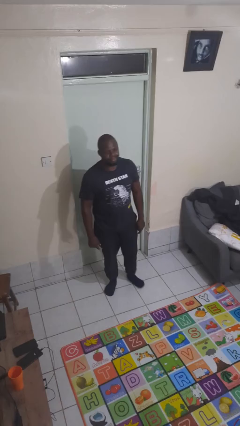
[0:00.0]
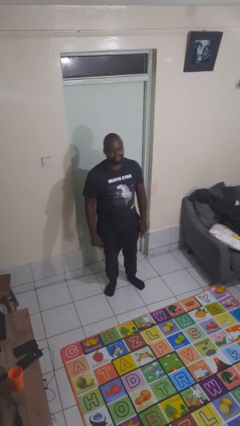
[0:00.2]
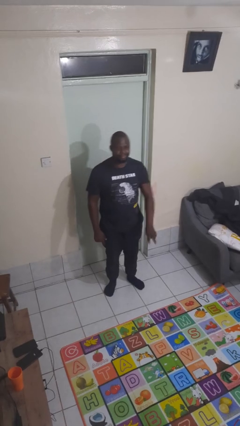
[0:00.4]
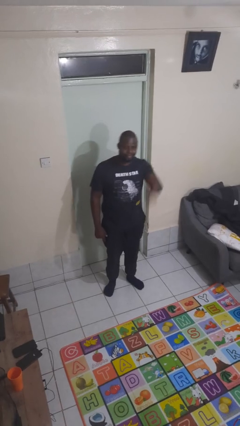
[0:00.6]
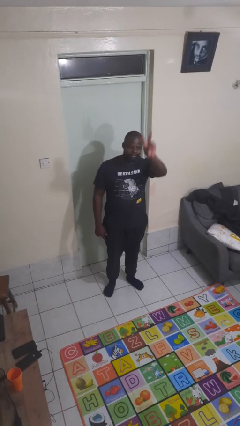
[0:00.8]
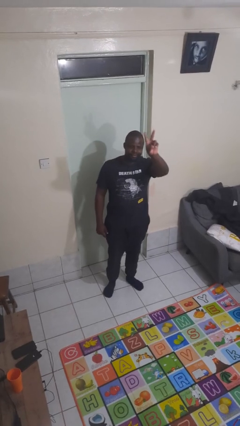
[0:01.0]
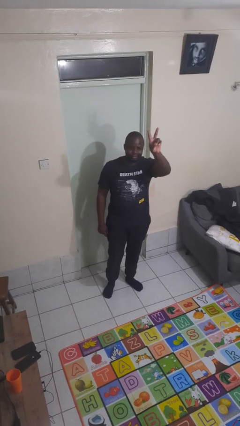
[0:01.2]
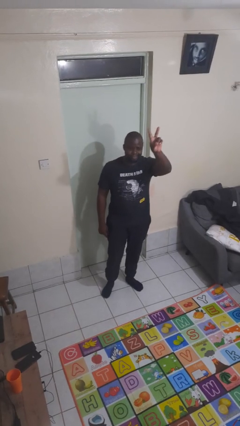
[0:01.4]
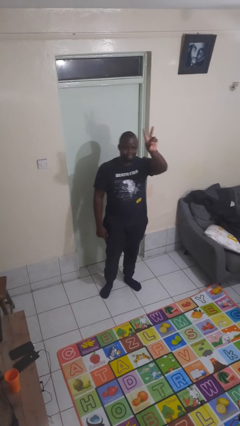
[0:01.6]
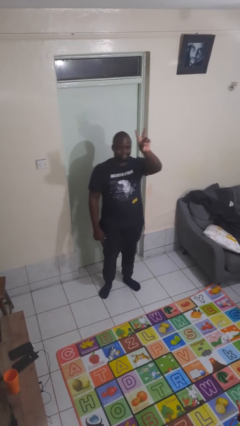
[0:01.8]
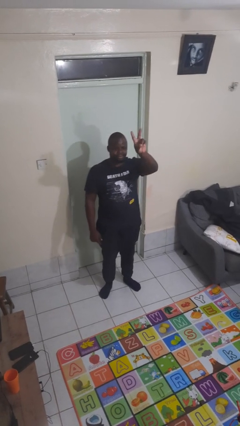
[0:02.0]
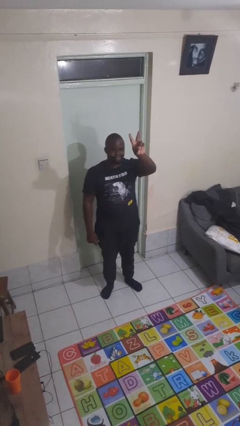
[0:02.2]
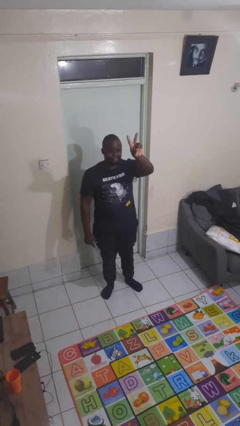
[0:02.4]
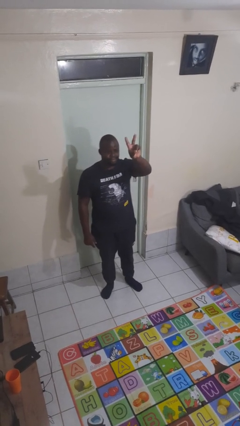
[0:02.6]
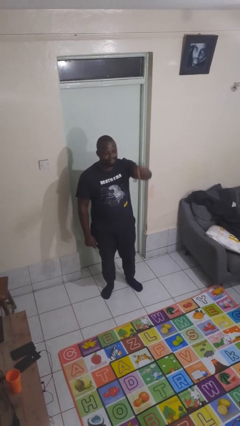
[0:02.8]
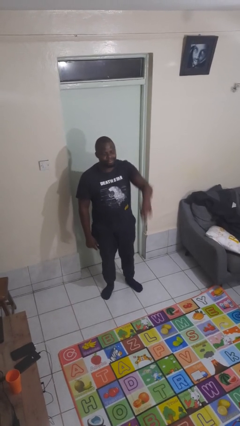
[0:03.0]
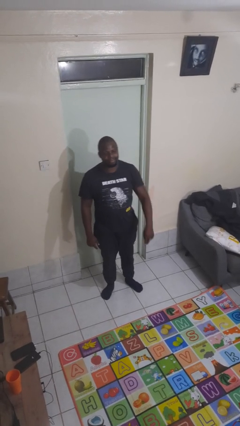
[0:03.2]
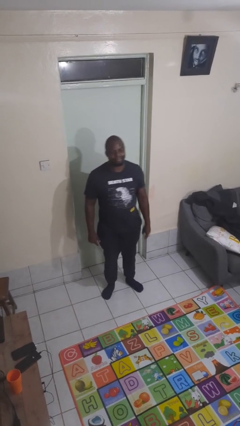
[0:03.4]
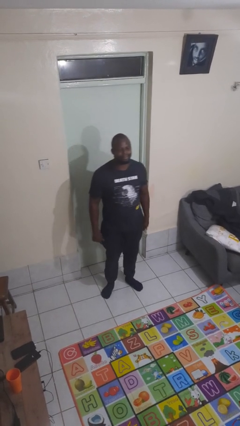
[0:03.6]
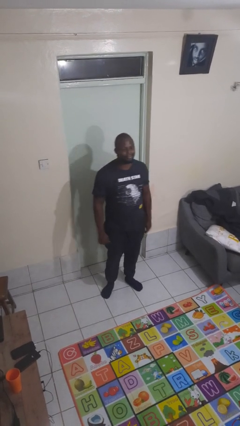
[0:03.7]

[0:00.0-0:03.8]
person gestures peace

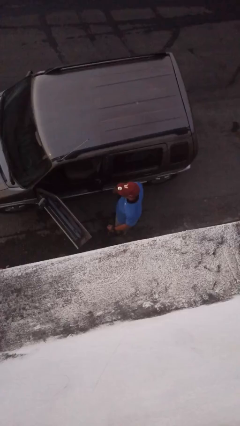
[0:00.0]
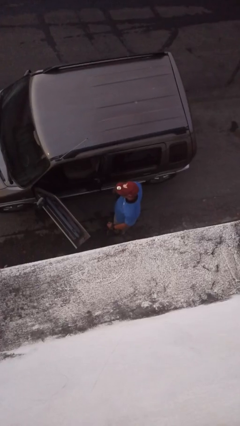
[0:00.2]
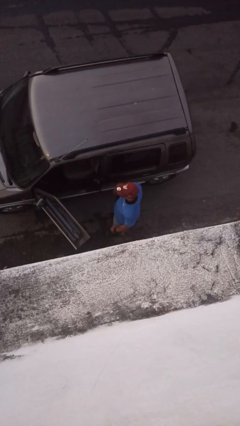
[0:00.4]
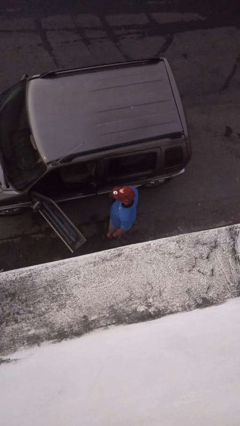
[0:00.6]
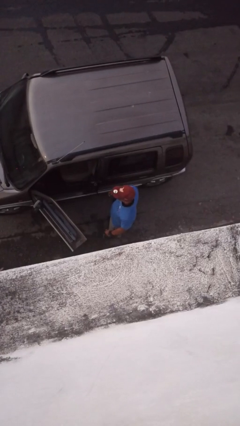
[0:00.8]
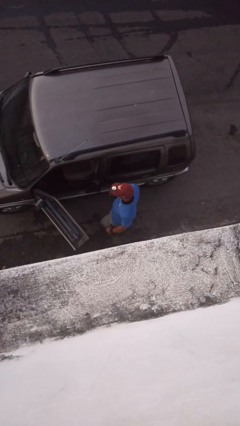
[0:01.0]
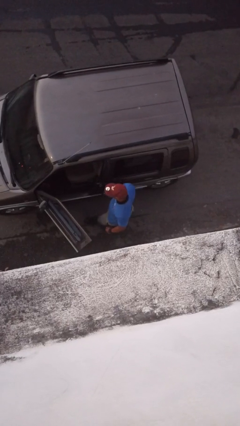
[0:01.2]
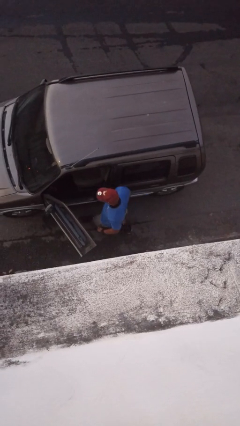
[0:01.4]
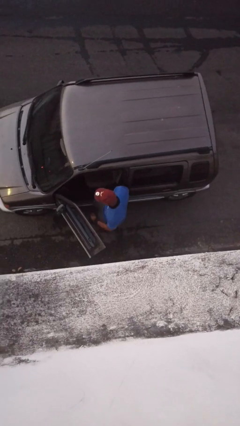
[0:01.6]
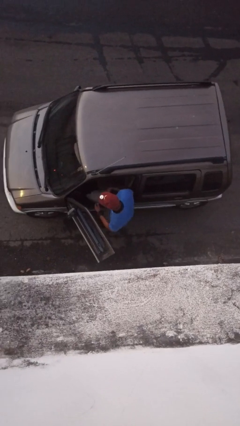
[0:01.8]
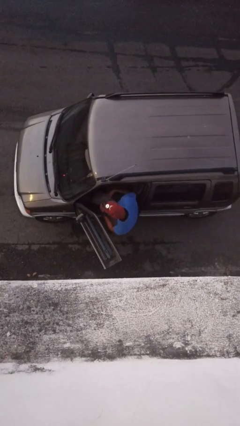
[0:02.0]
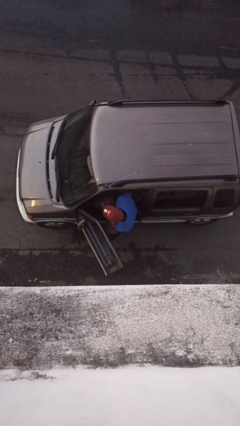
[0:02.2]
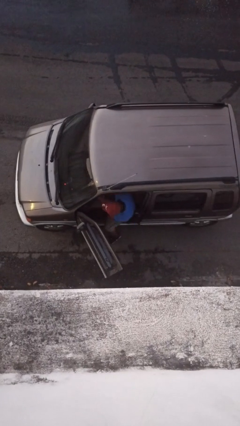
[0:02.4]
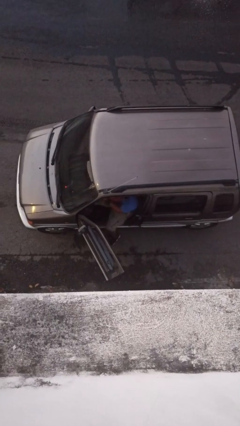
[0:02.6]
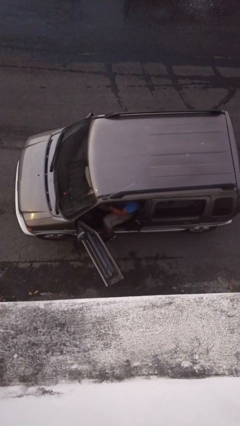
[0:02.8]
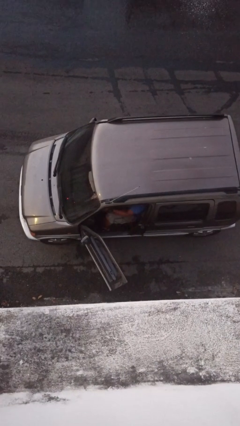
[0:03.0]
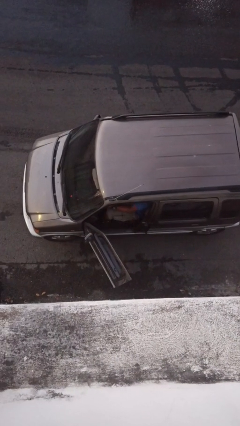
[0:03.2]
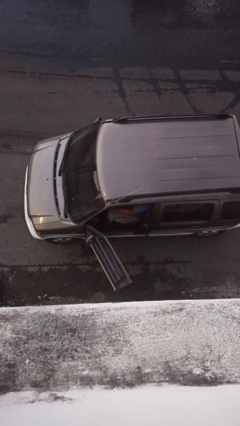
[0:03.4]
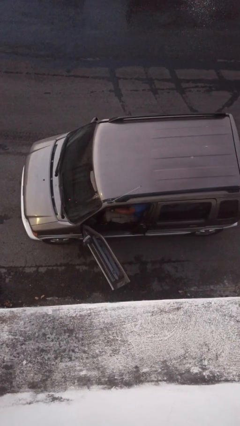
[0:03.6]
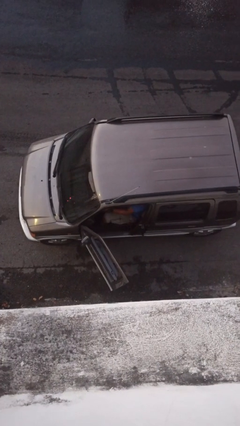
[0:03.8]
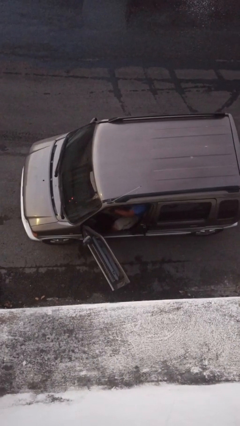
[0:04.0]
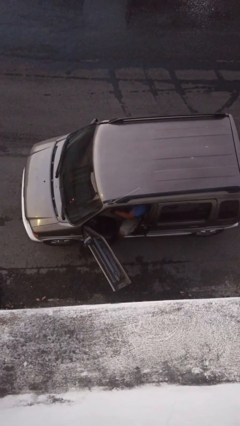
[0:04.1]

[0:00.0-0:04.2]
person enters car

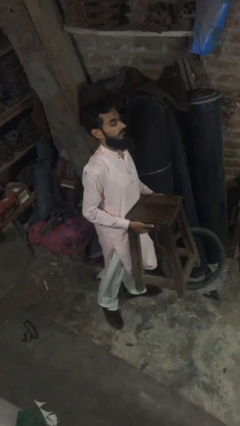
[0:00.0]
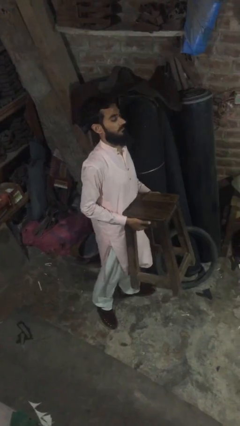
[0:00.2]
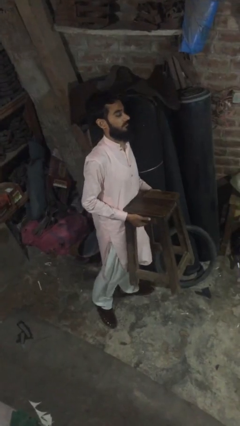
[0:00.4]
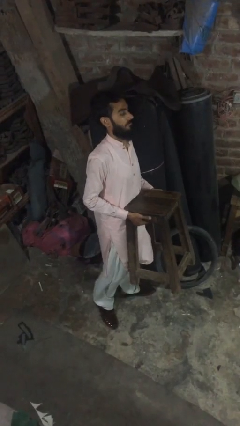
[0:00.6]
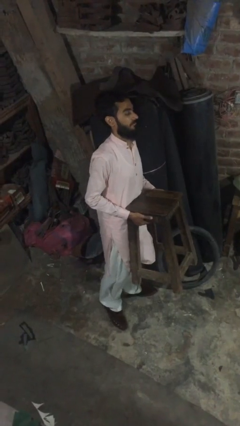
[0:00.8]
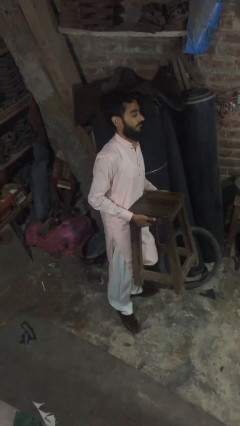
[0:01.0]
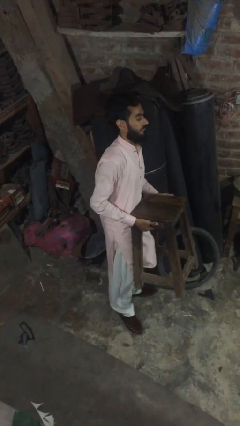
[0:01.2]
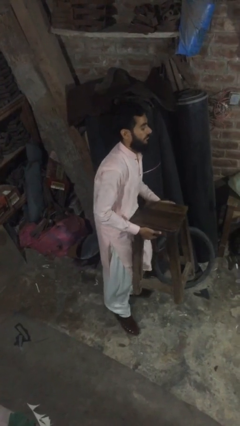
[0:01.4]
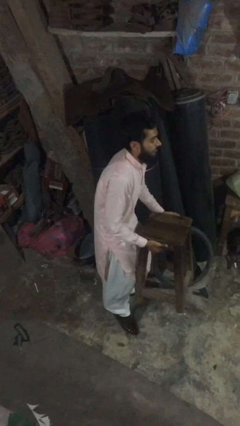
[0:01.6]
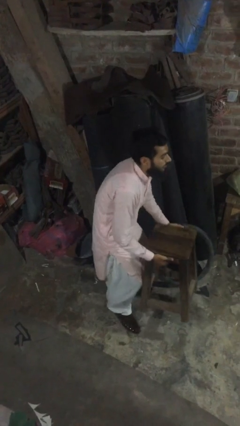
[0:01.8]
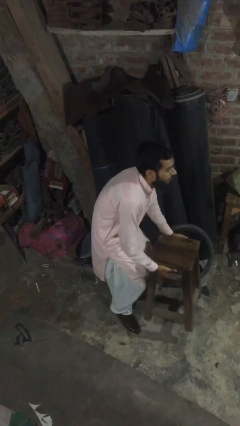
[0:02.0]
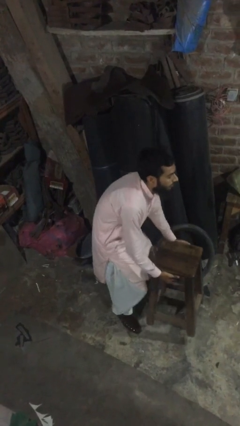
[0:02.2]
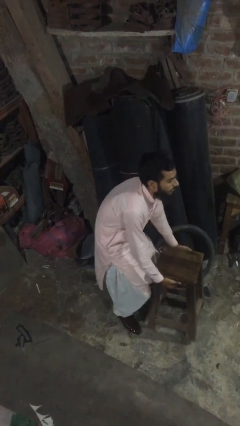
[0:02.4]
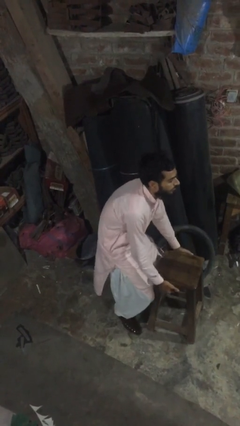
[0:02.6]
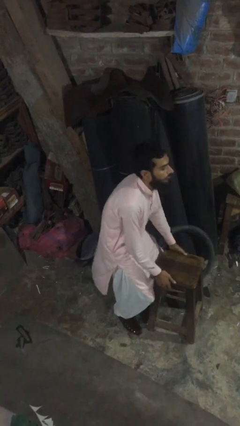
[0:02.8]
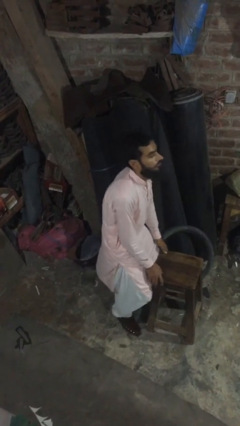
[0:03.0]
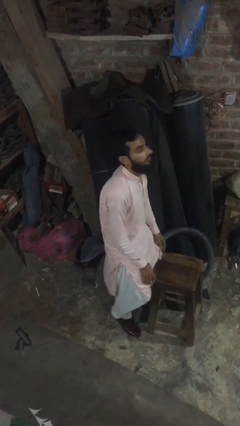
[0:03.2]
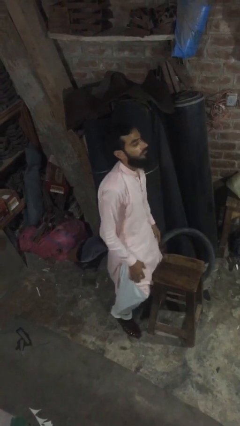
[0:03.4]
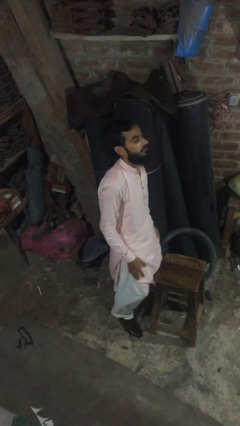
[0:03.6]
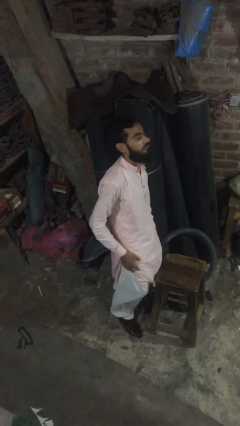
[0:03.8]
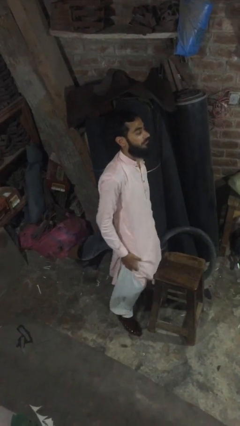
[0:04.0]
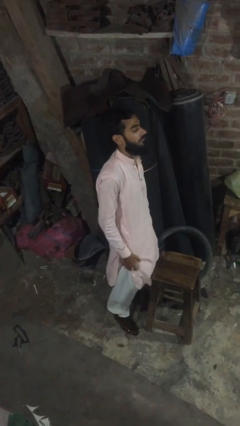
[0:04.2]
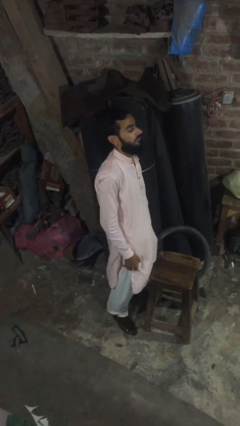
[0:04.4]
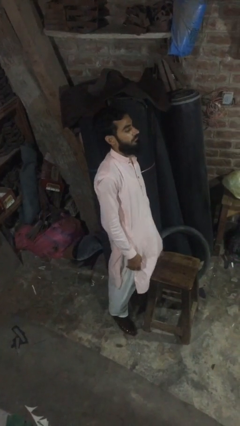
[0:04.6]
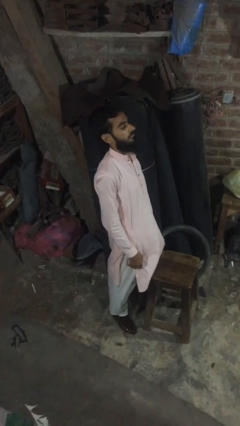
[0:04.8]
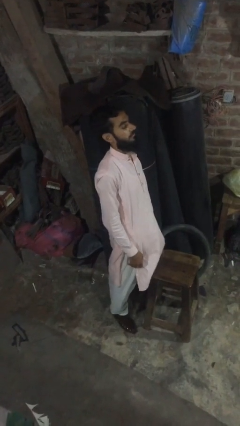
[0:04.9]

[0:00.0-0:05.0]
person puts down object on floor

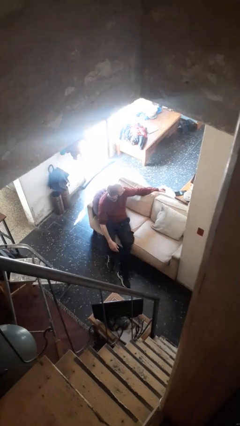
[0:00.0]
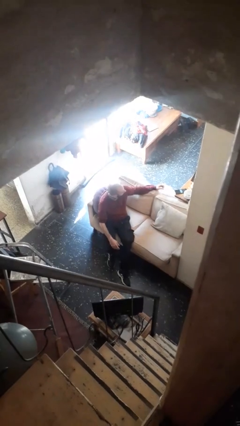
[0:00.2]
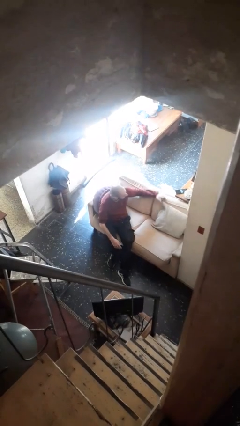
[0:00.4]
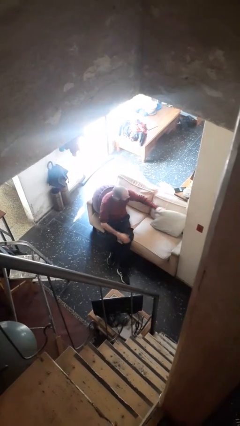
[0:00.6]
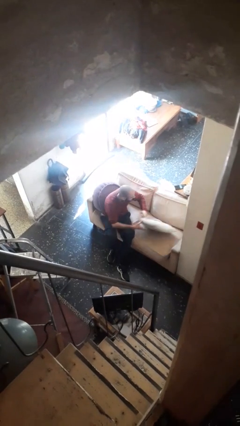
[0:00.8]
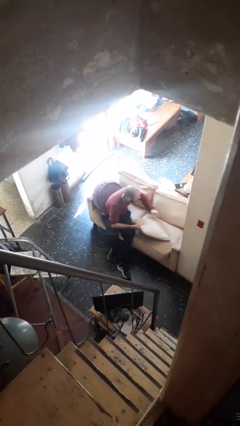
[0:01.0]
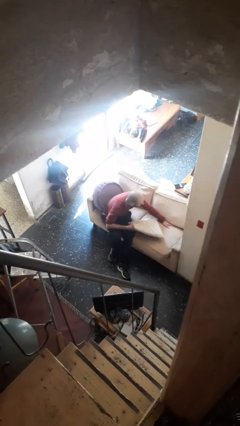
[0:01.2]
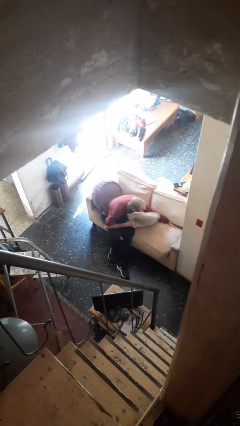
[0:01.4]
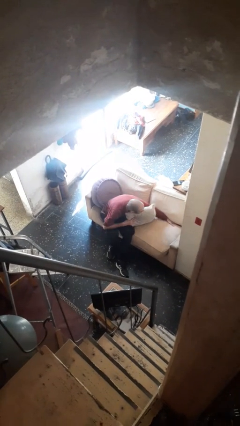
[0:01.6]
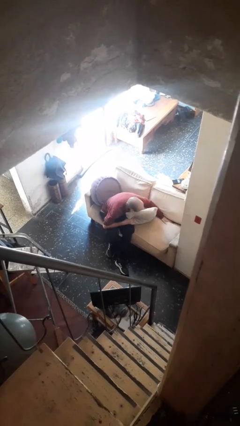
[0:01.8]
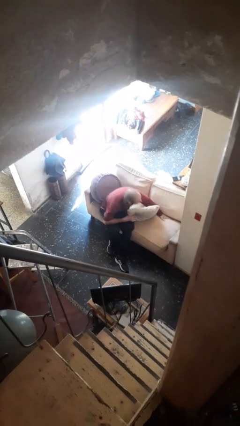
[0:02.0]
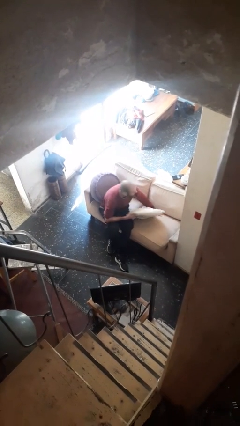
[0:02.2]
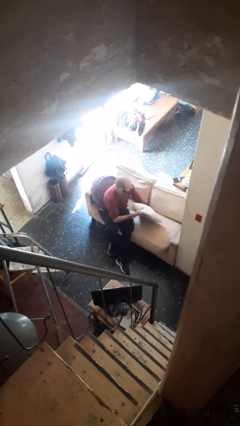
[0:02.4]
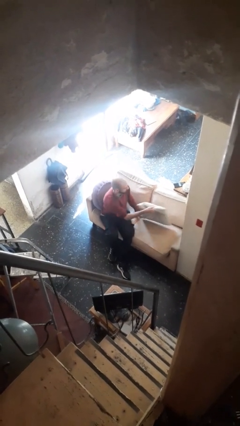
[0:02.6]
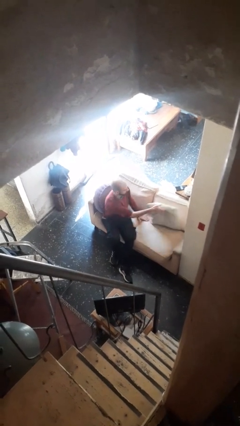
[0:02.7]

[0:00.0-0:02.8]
person searches in couch

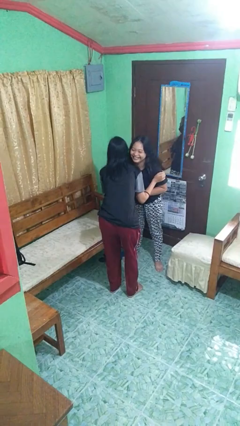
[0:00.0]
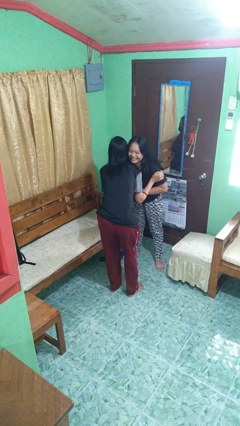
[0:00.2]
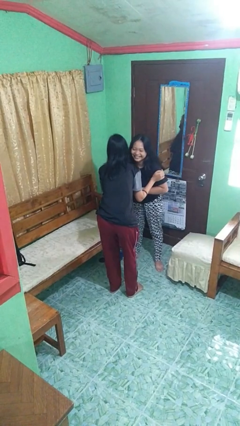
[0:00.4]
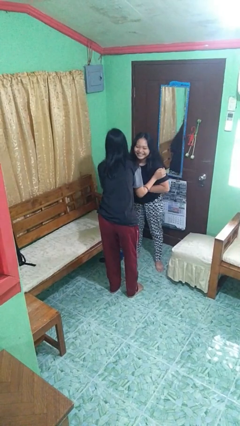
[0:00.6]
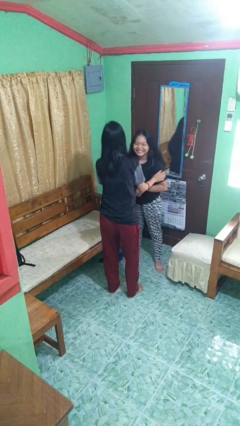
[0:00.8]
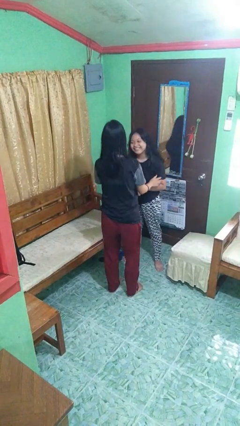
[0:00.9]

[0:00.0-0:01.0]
person kisses cheek of person

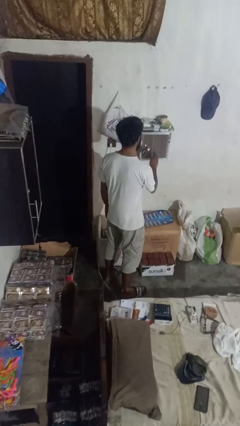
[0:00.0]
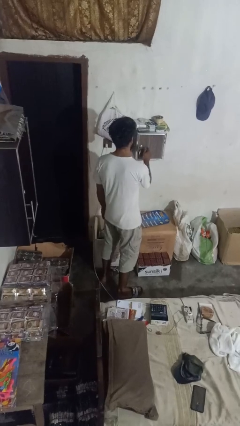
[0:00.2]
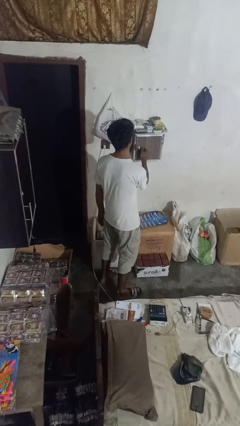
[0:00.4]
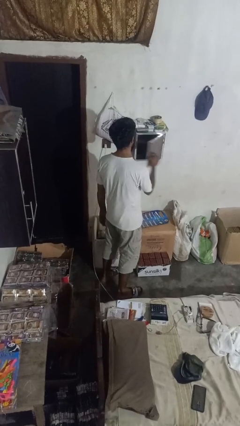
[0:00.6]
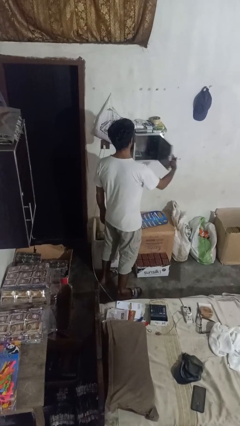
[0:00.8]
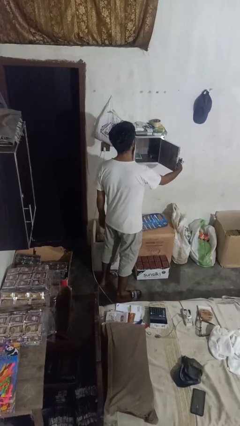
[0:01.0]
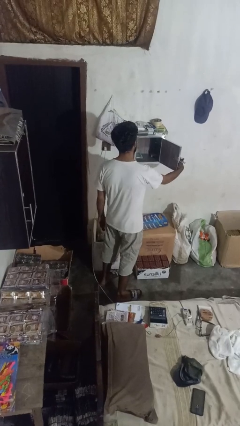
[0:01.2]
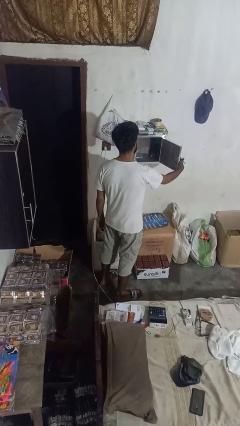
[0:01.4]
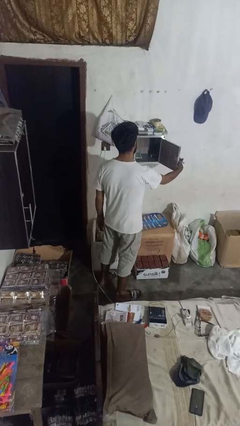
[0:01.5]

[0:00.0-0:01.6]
person picks up object from cabinet
